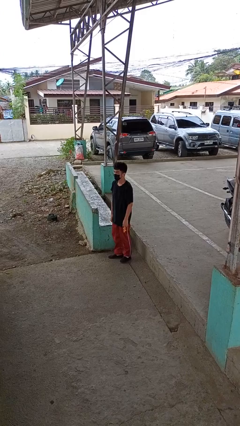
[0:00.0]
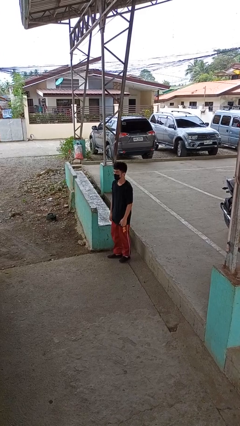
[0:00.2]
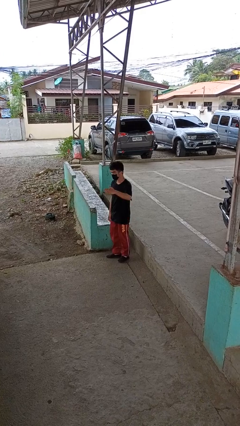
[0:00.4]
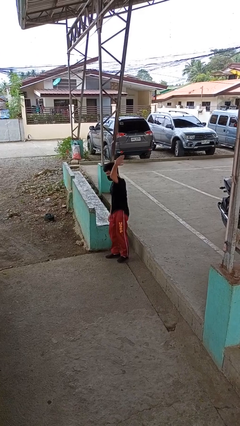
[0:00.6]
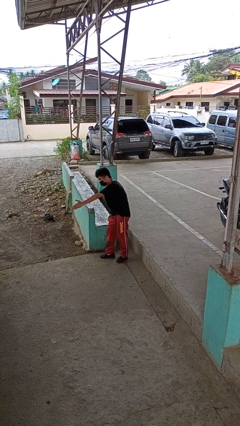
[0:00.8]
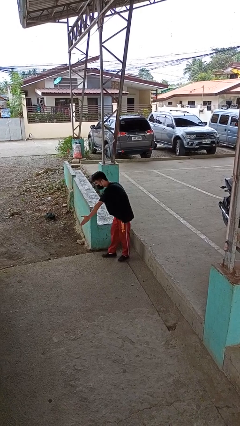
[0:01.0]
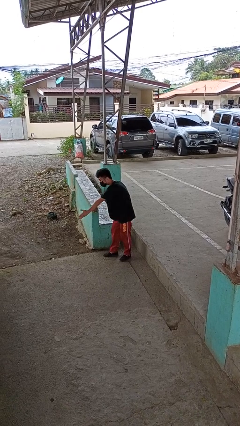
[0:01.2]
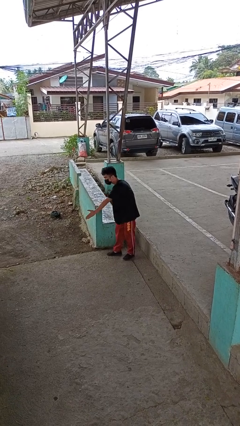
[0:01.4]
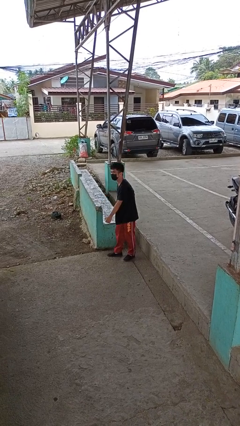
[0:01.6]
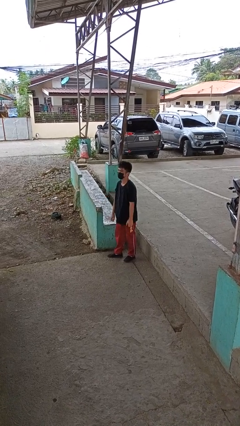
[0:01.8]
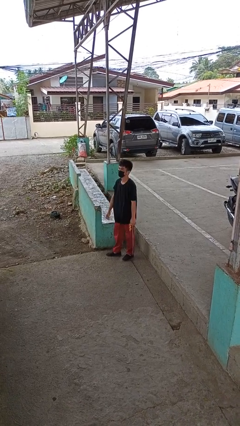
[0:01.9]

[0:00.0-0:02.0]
person karate chop

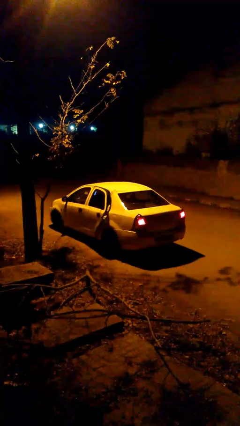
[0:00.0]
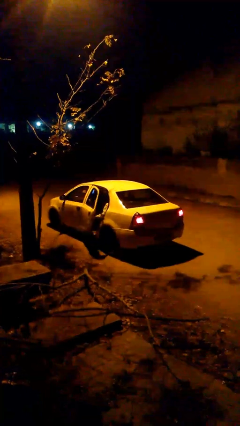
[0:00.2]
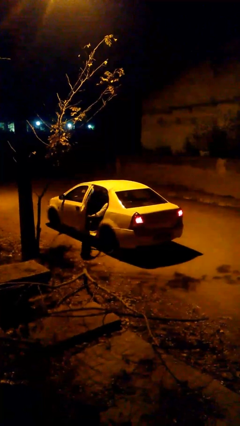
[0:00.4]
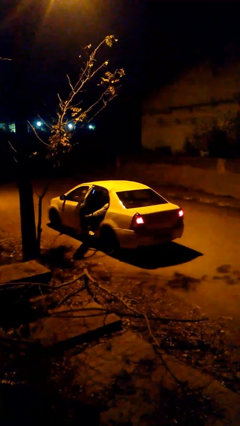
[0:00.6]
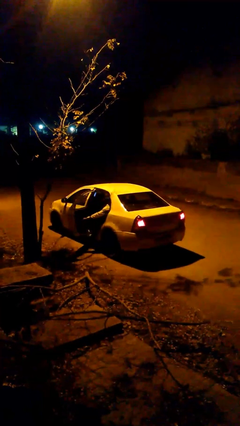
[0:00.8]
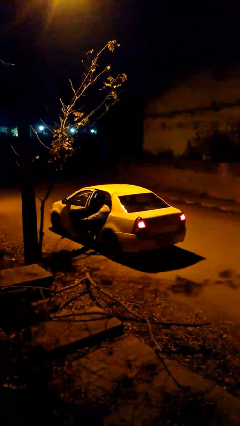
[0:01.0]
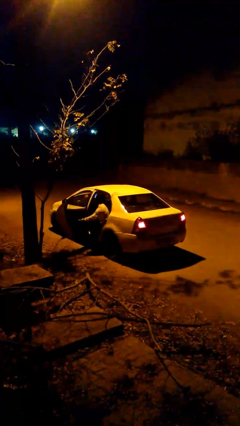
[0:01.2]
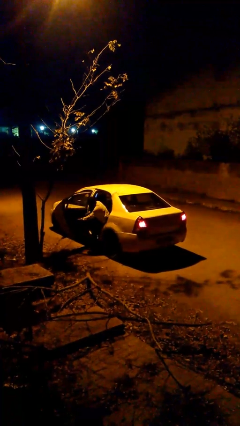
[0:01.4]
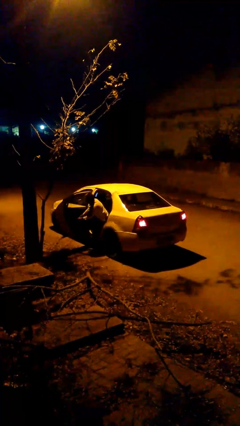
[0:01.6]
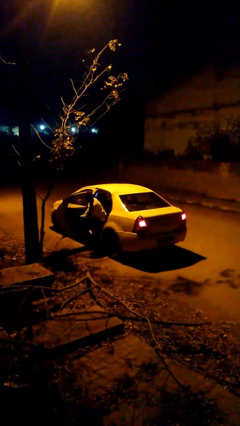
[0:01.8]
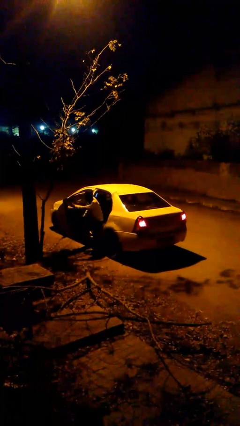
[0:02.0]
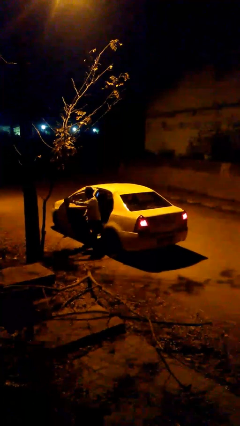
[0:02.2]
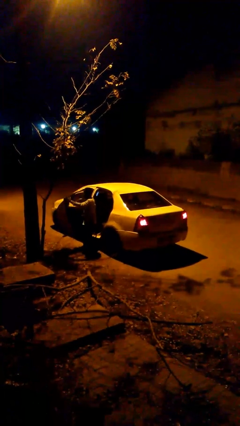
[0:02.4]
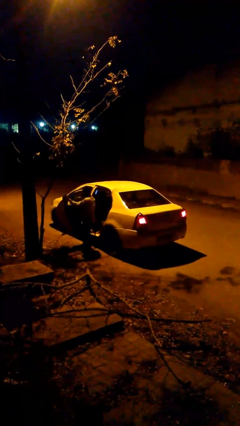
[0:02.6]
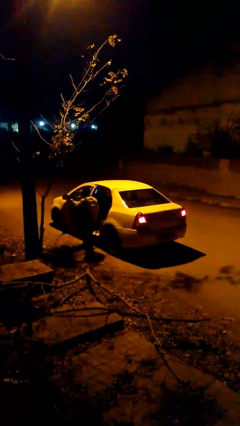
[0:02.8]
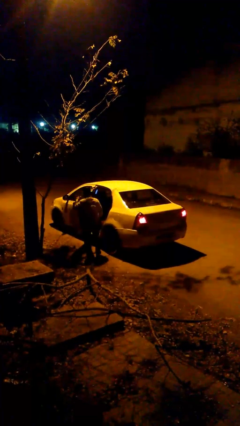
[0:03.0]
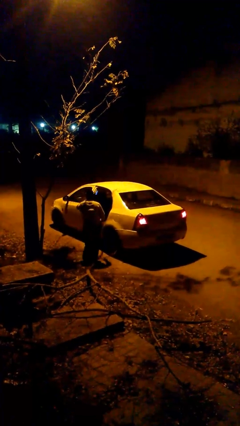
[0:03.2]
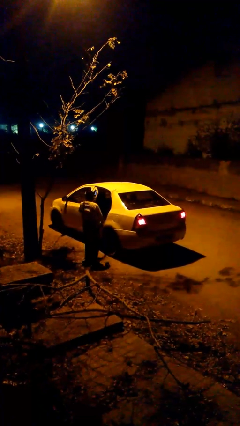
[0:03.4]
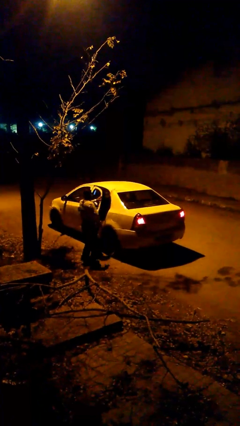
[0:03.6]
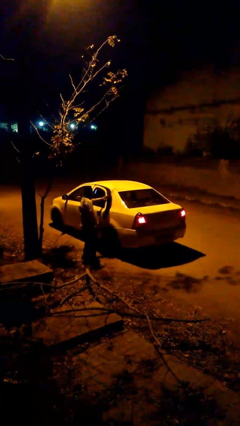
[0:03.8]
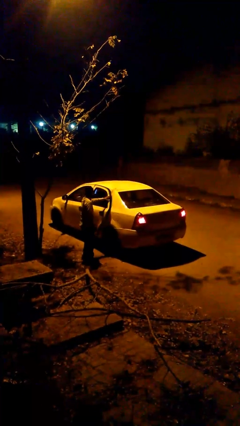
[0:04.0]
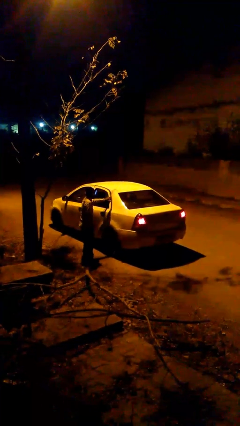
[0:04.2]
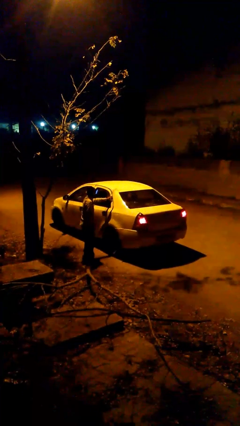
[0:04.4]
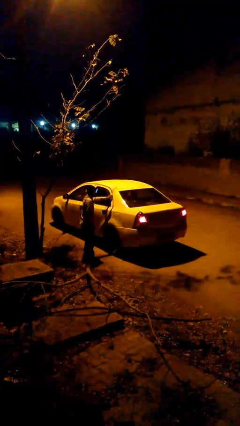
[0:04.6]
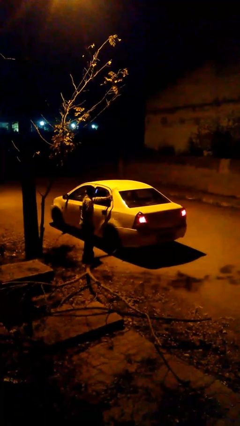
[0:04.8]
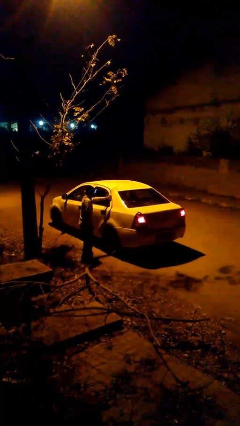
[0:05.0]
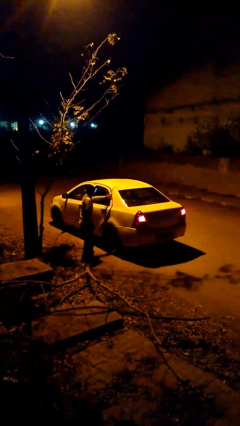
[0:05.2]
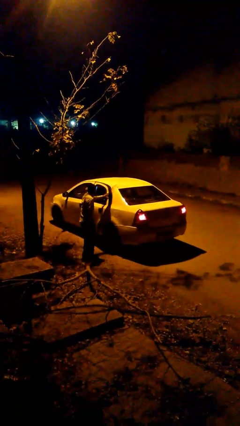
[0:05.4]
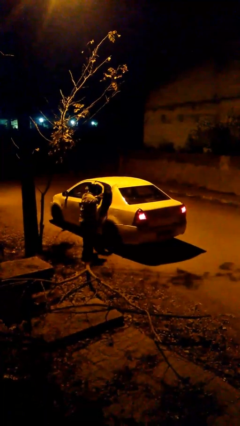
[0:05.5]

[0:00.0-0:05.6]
car drops off person

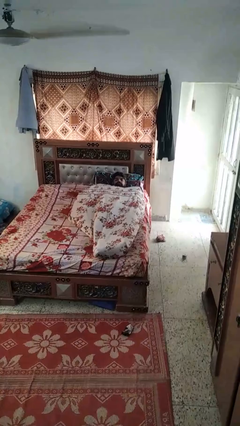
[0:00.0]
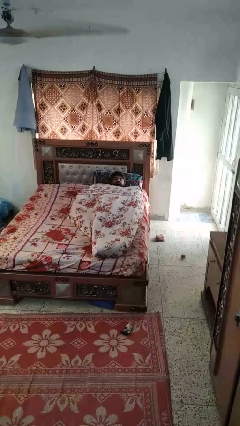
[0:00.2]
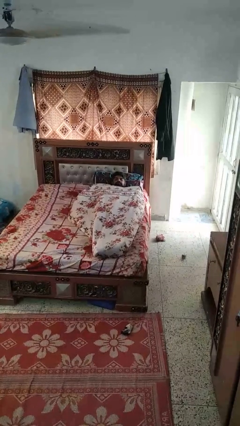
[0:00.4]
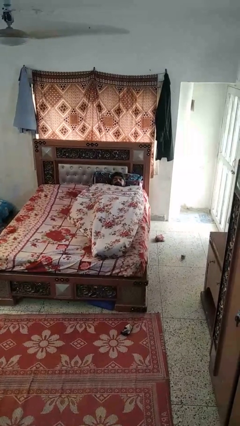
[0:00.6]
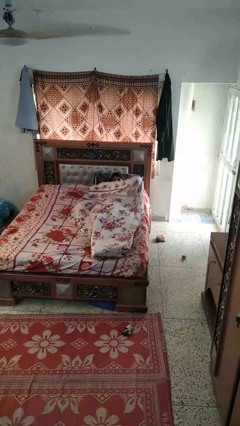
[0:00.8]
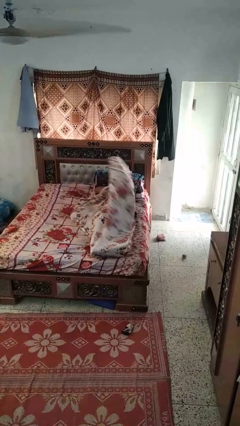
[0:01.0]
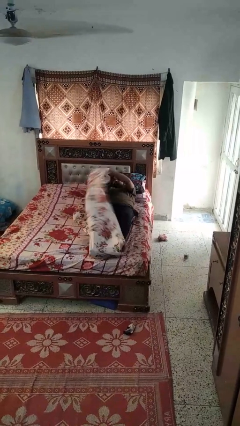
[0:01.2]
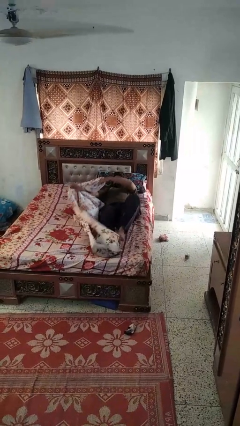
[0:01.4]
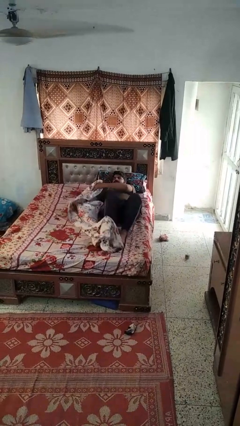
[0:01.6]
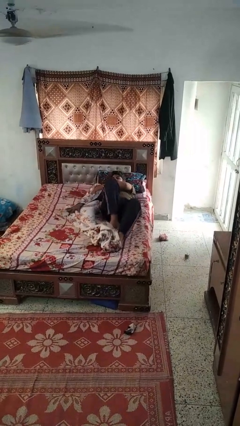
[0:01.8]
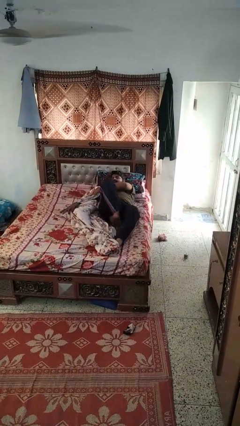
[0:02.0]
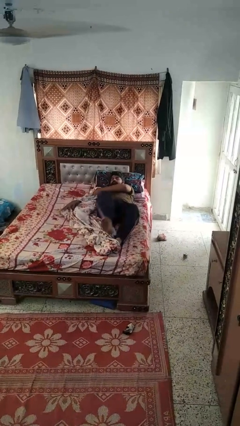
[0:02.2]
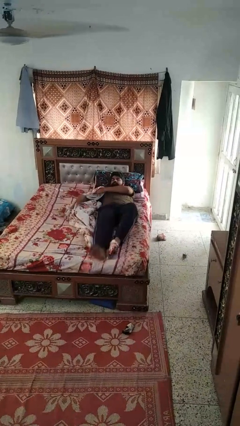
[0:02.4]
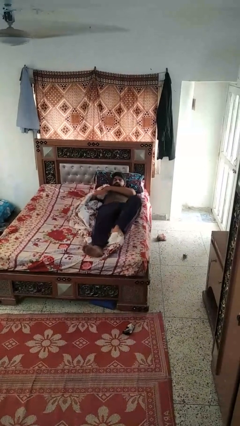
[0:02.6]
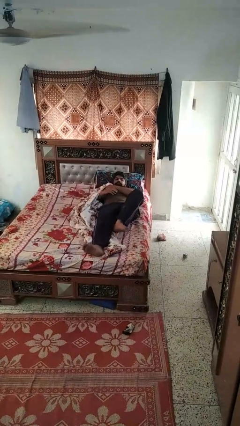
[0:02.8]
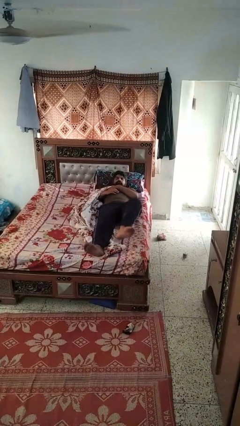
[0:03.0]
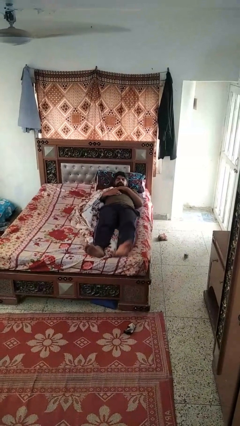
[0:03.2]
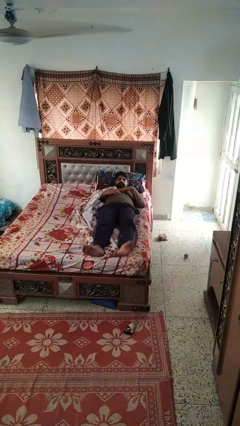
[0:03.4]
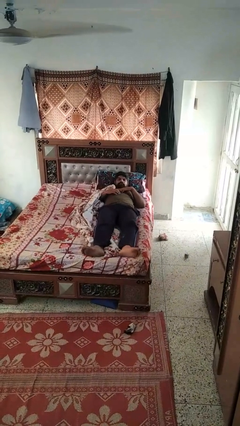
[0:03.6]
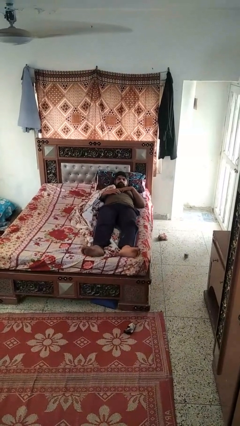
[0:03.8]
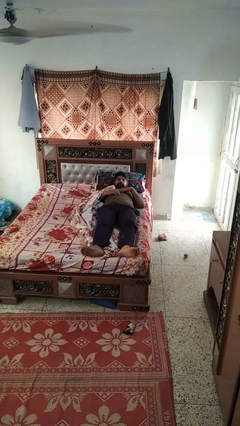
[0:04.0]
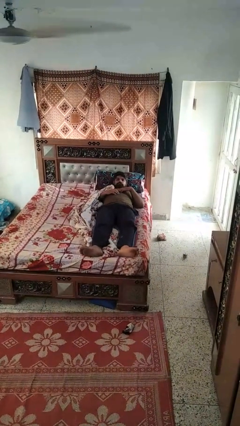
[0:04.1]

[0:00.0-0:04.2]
person uncovers with bedsheets

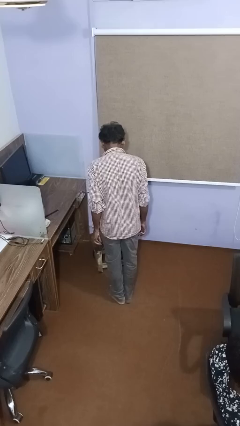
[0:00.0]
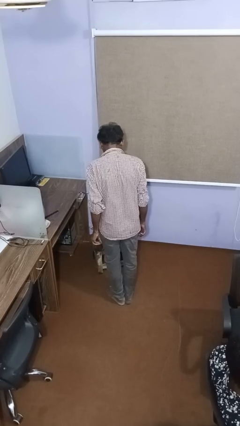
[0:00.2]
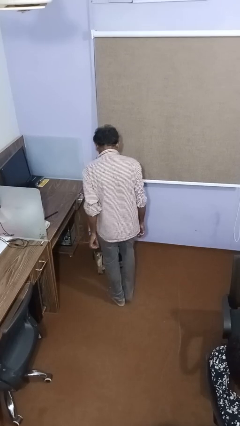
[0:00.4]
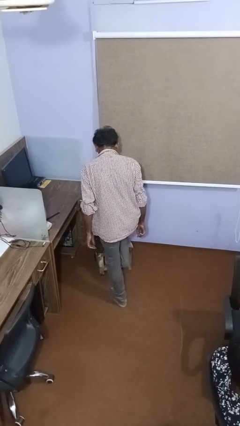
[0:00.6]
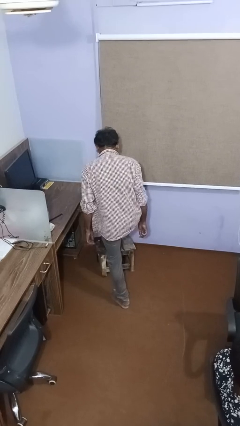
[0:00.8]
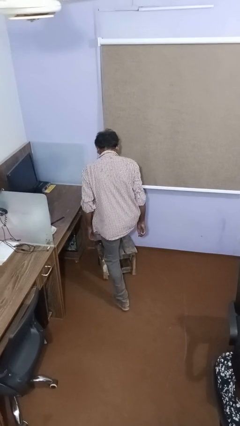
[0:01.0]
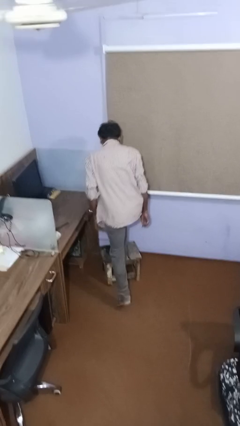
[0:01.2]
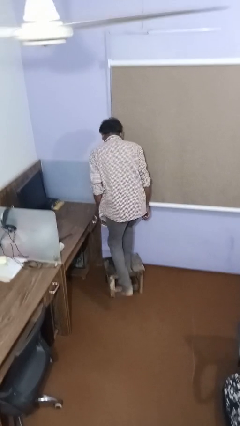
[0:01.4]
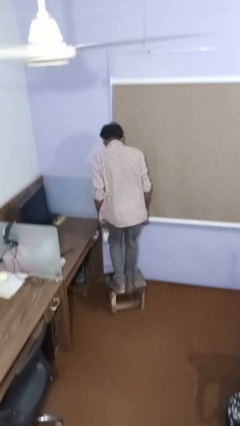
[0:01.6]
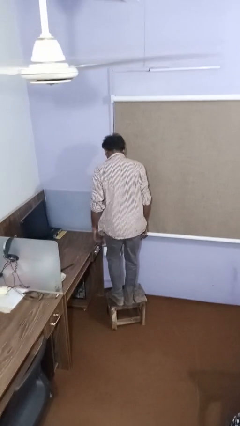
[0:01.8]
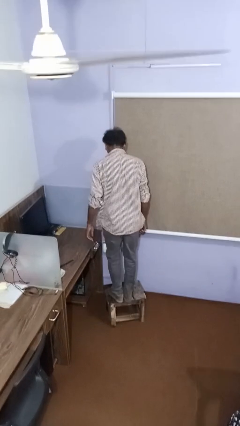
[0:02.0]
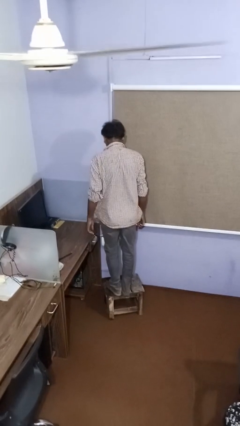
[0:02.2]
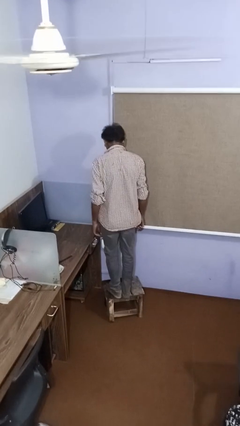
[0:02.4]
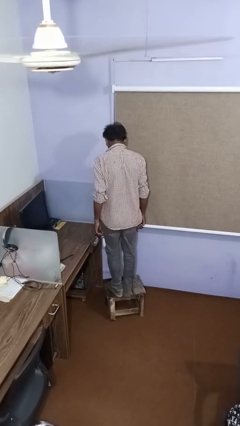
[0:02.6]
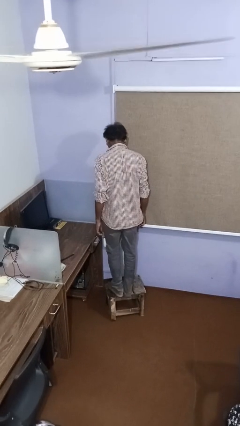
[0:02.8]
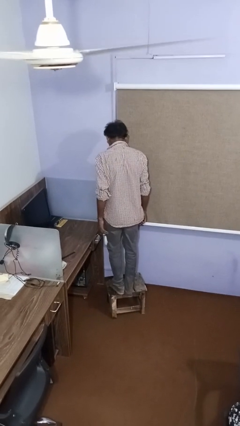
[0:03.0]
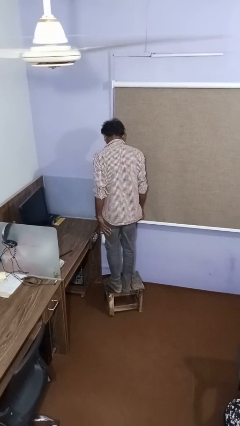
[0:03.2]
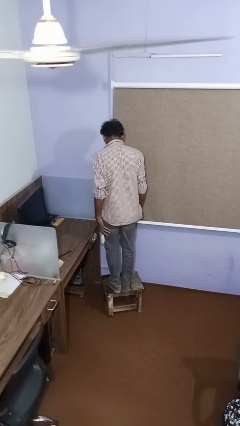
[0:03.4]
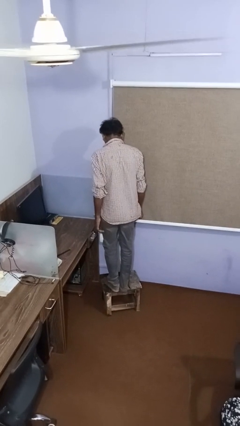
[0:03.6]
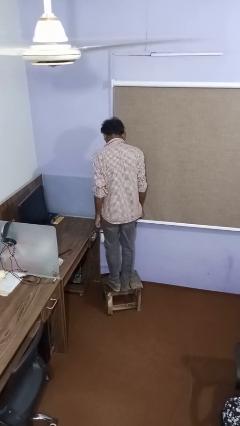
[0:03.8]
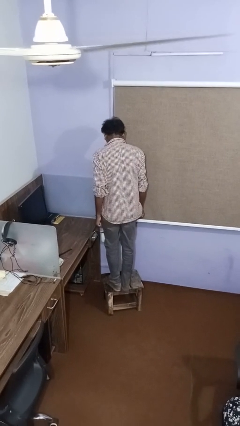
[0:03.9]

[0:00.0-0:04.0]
person climbs on table

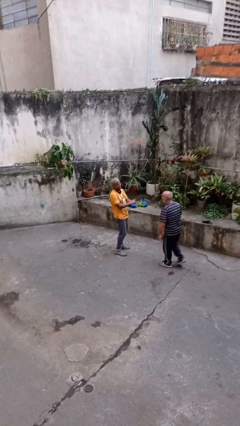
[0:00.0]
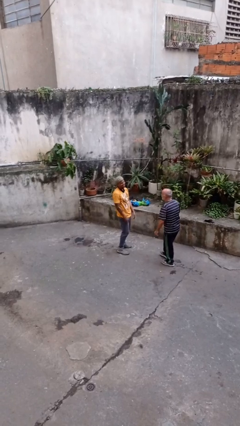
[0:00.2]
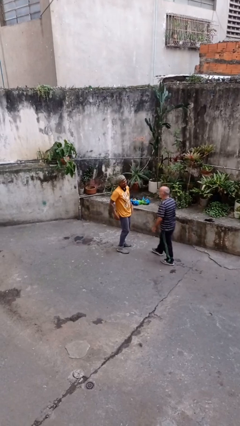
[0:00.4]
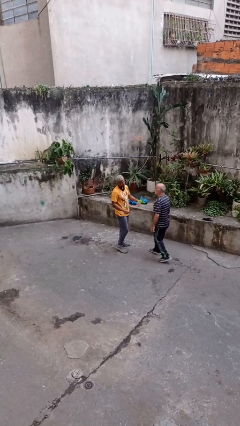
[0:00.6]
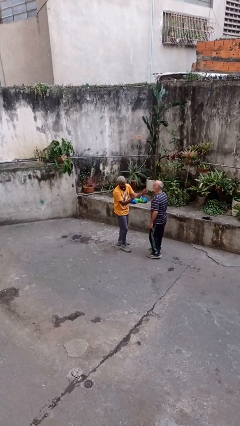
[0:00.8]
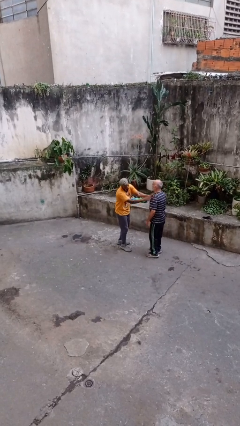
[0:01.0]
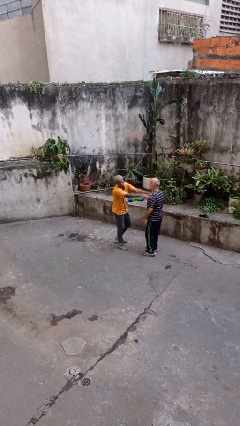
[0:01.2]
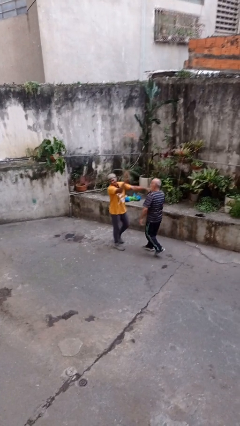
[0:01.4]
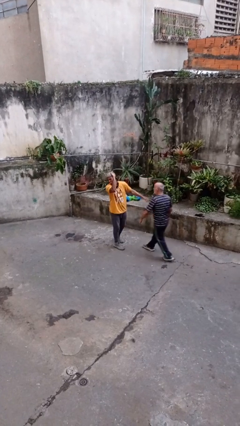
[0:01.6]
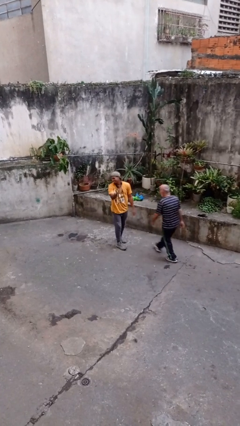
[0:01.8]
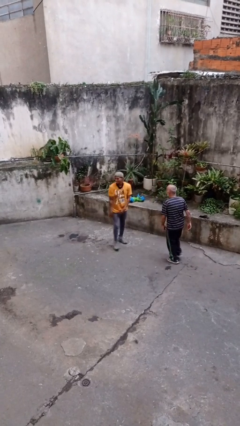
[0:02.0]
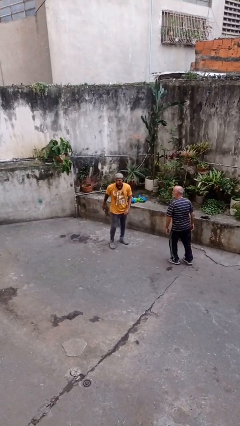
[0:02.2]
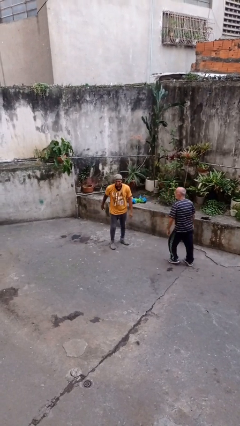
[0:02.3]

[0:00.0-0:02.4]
person shoves person
